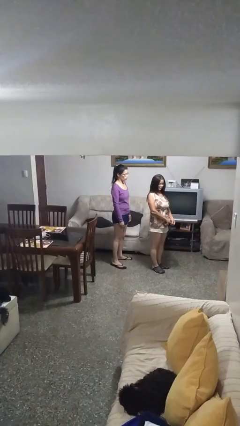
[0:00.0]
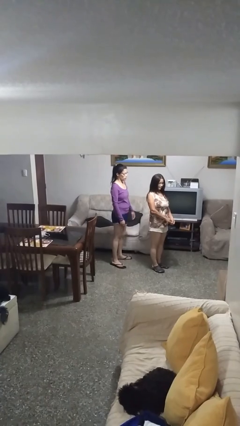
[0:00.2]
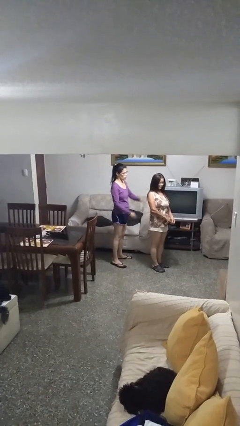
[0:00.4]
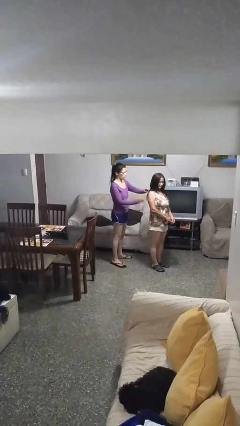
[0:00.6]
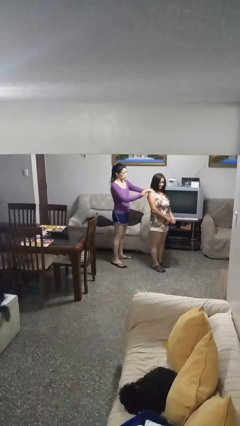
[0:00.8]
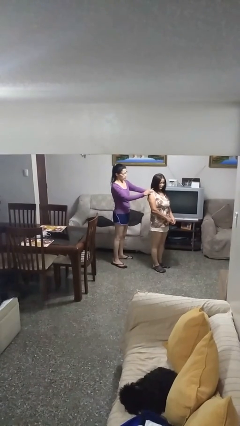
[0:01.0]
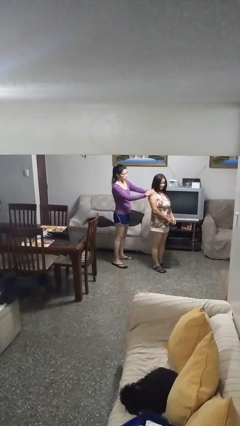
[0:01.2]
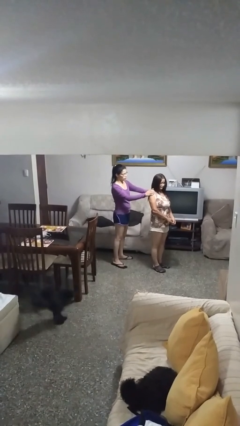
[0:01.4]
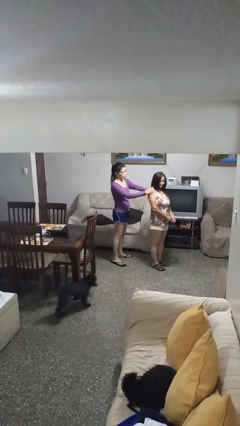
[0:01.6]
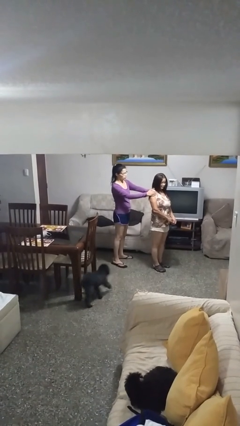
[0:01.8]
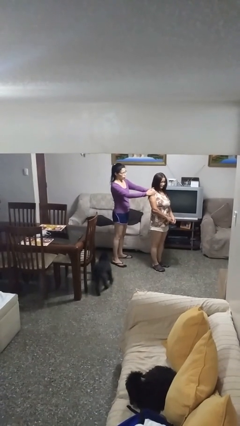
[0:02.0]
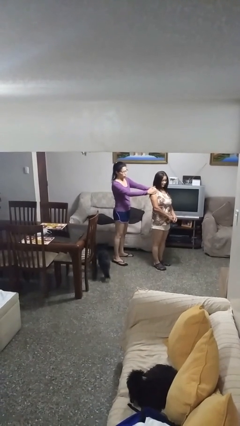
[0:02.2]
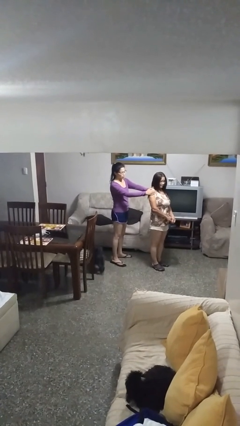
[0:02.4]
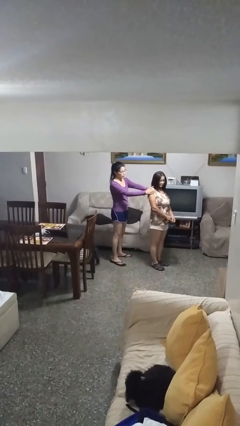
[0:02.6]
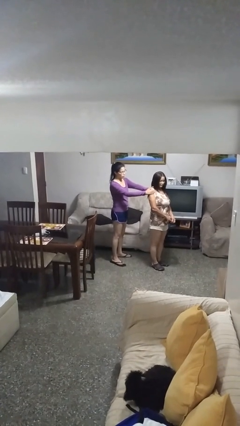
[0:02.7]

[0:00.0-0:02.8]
person grabs person by shoulder

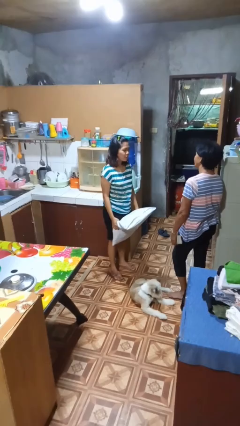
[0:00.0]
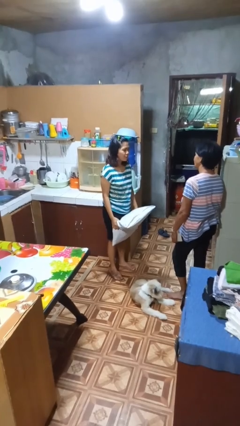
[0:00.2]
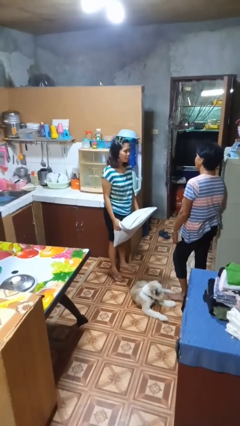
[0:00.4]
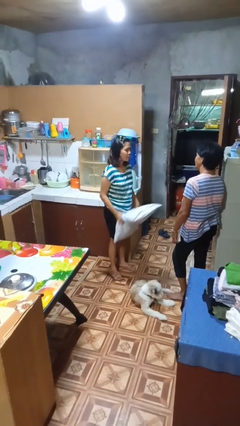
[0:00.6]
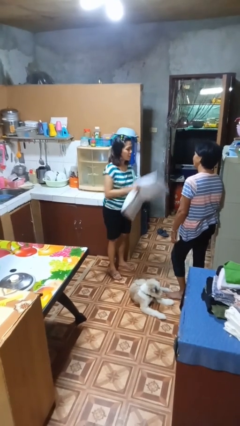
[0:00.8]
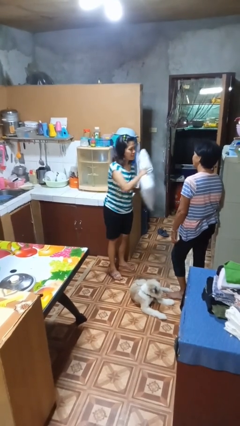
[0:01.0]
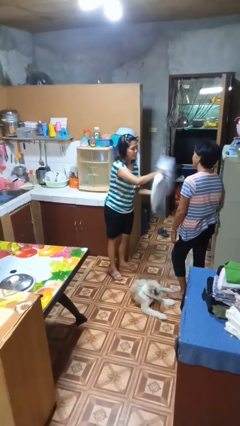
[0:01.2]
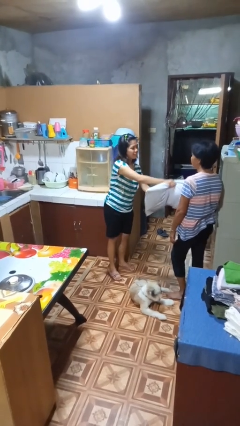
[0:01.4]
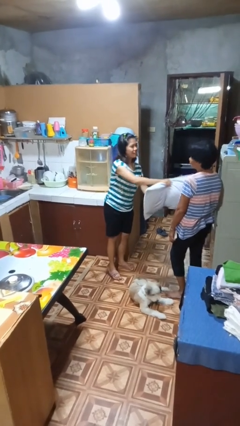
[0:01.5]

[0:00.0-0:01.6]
person hits person with pillow

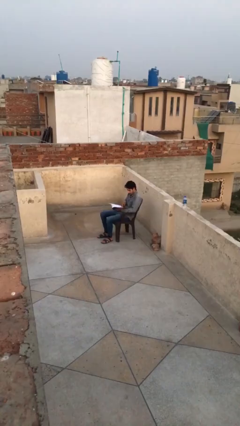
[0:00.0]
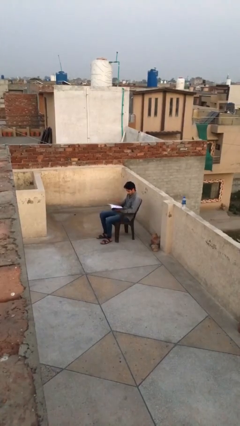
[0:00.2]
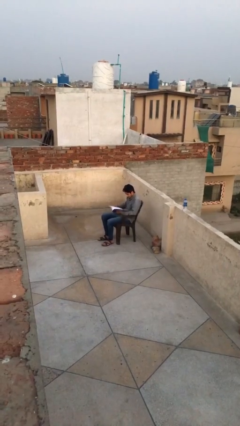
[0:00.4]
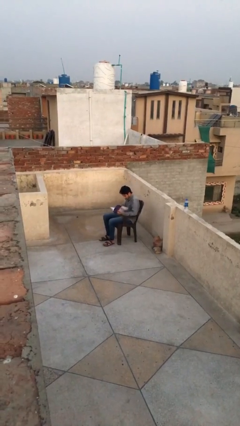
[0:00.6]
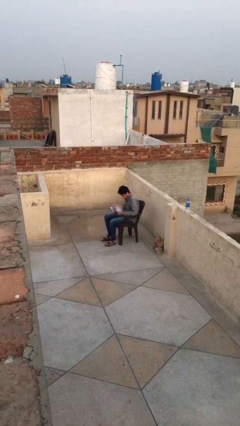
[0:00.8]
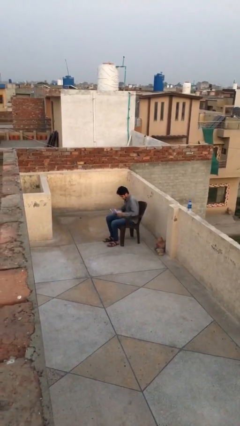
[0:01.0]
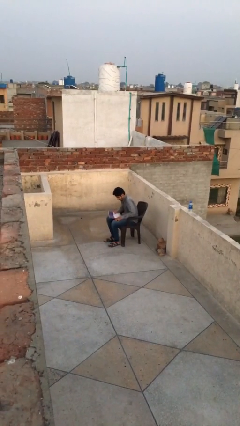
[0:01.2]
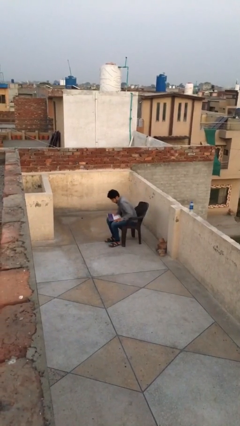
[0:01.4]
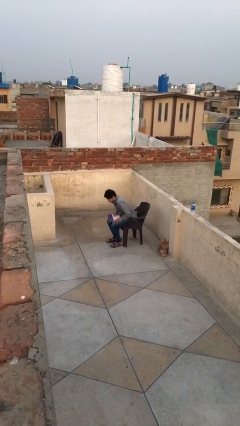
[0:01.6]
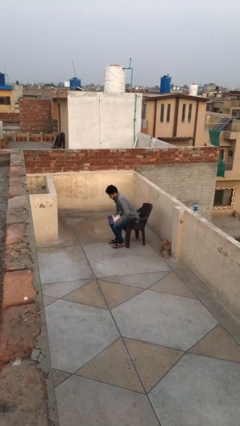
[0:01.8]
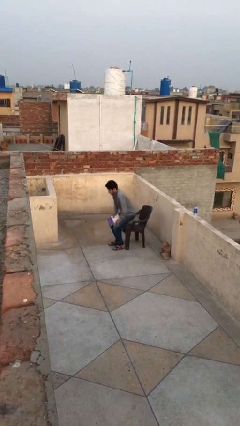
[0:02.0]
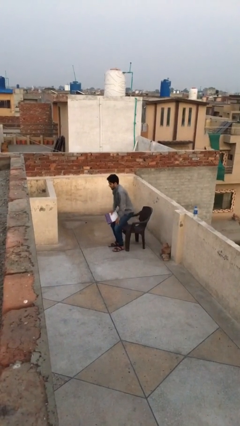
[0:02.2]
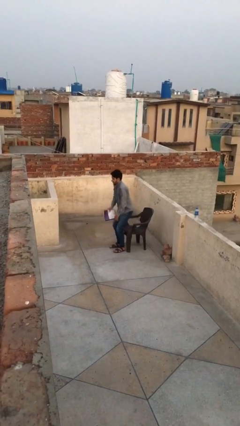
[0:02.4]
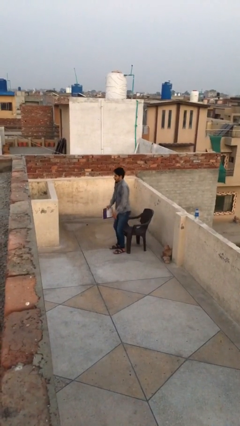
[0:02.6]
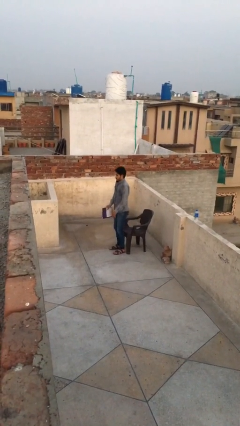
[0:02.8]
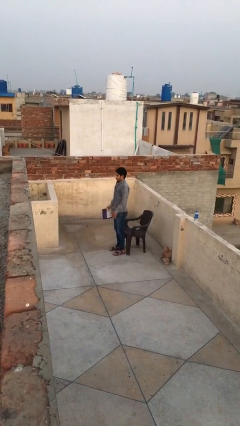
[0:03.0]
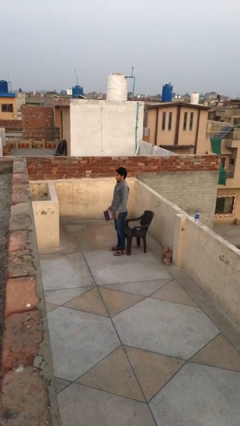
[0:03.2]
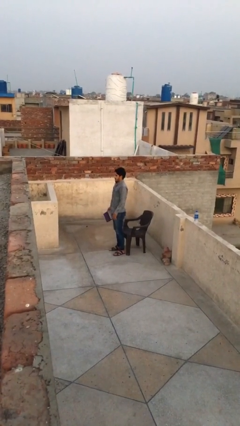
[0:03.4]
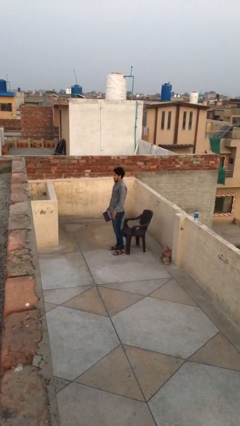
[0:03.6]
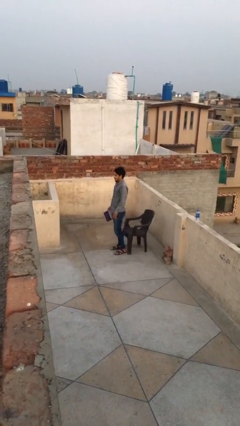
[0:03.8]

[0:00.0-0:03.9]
person stands up

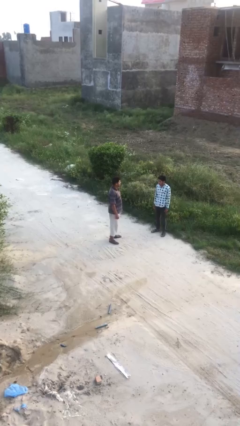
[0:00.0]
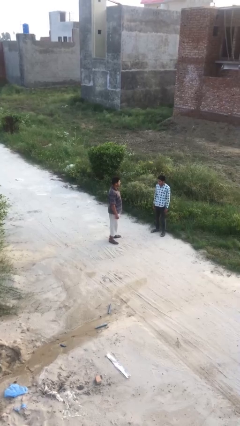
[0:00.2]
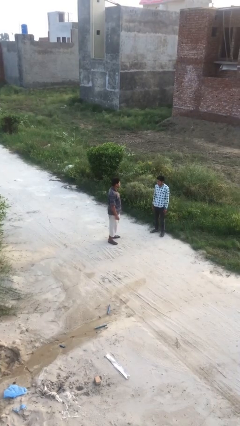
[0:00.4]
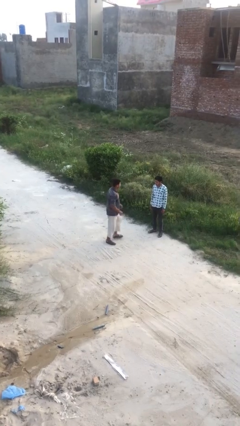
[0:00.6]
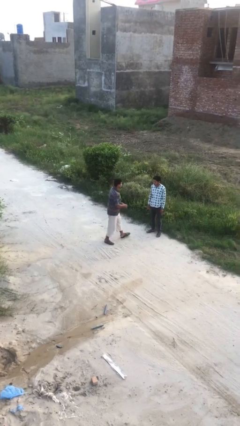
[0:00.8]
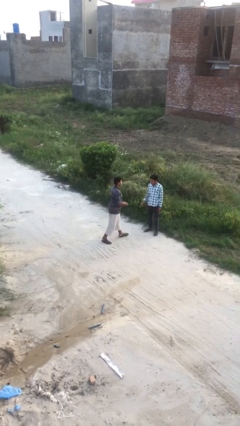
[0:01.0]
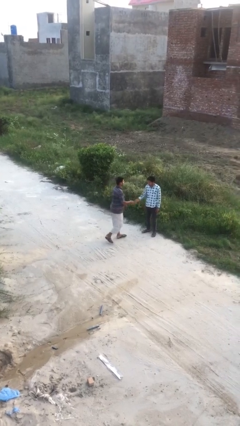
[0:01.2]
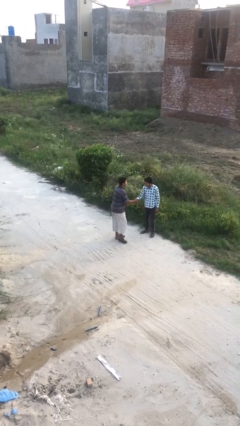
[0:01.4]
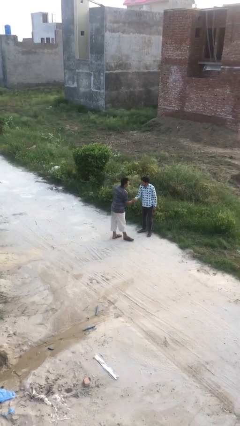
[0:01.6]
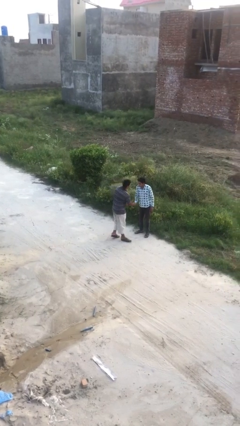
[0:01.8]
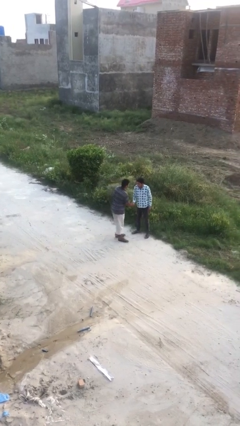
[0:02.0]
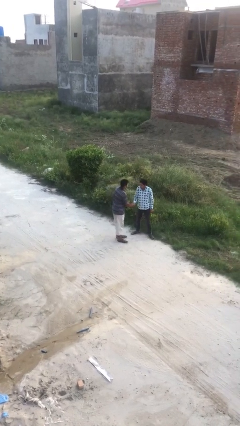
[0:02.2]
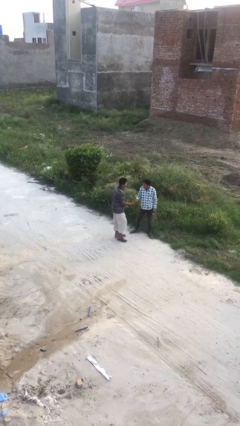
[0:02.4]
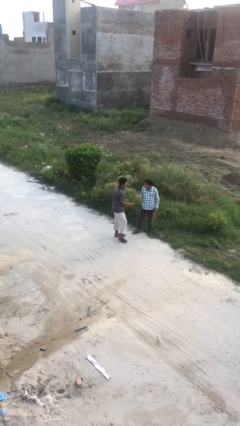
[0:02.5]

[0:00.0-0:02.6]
person shakes hand

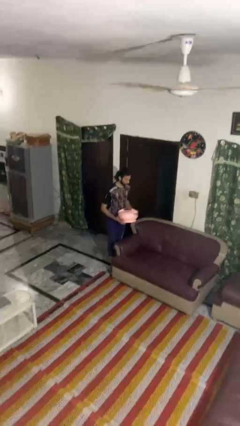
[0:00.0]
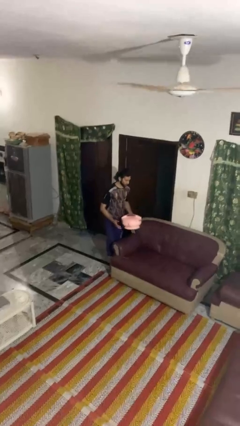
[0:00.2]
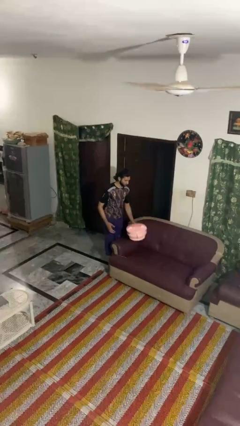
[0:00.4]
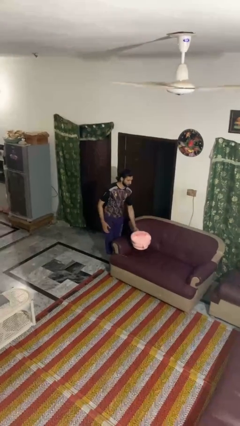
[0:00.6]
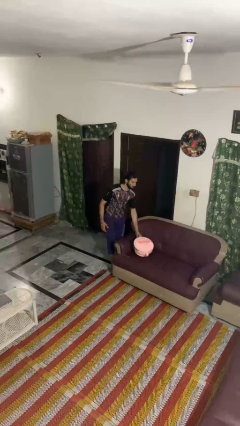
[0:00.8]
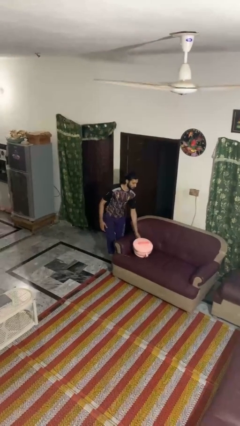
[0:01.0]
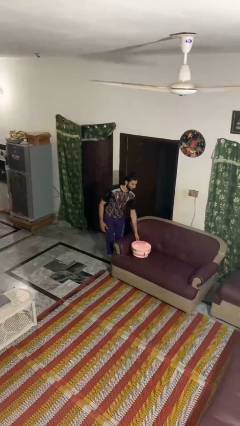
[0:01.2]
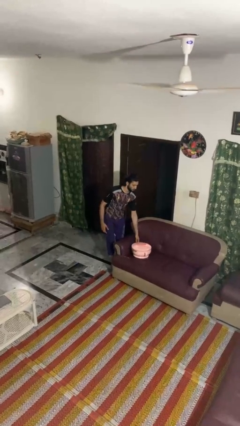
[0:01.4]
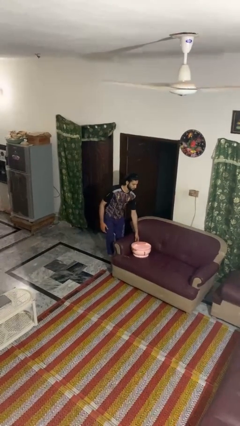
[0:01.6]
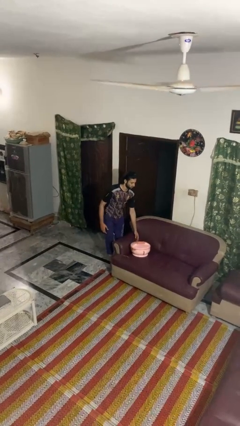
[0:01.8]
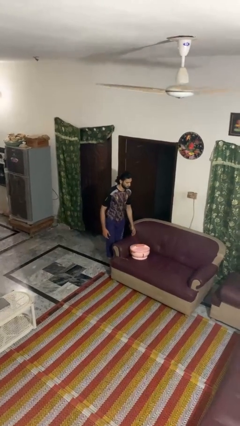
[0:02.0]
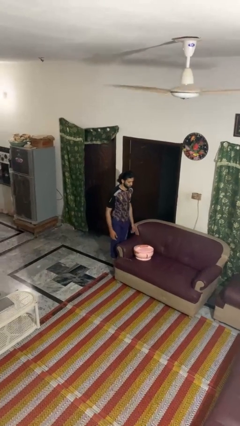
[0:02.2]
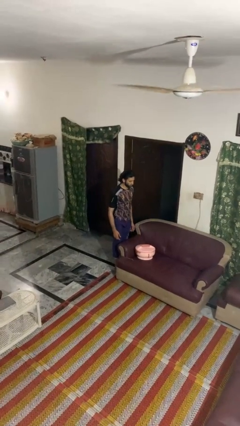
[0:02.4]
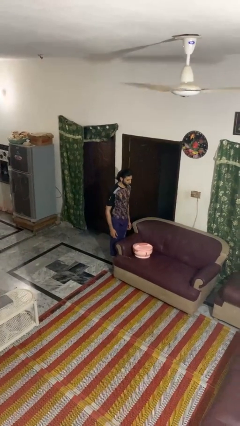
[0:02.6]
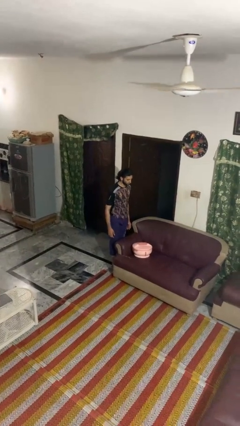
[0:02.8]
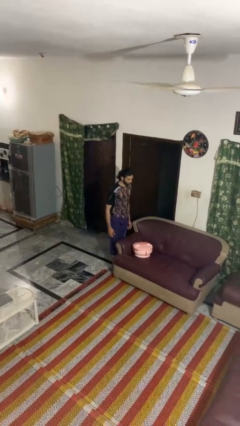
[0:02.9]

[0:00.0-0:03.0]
person puts down object on couch

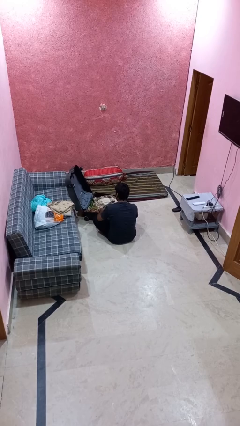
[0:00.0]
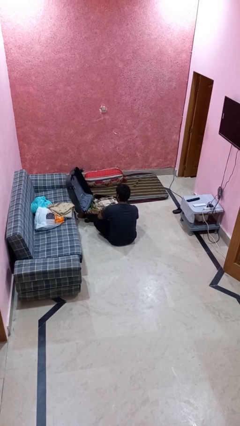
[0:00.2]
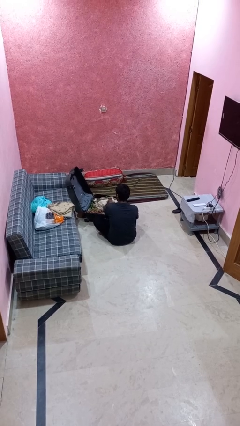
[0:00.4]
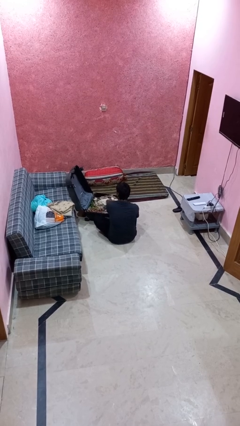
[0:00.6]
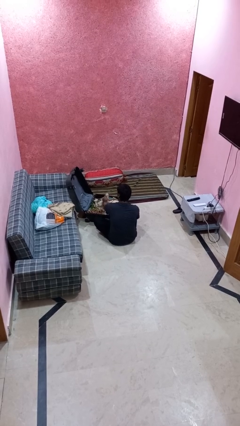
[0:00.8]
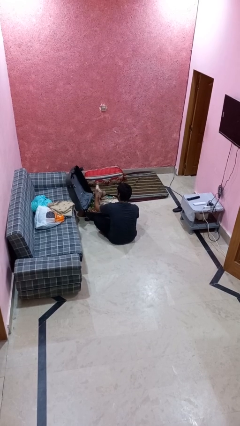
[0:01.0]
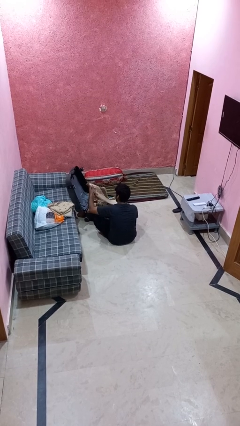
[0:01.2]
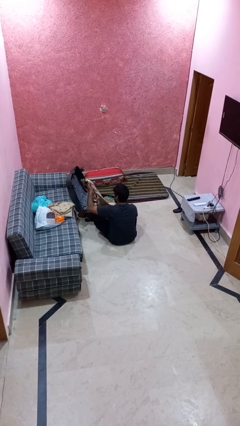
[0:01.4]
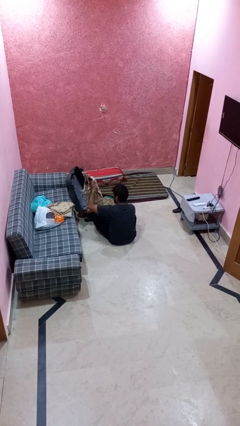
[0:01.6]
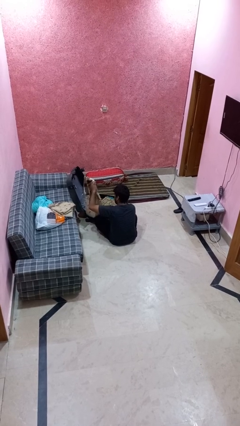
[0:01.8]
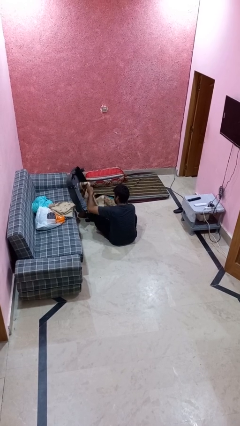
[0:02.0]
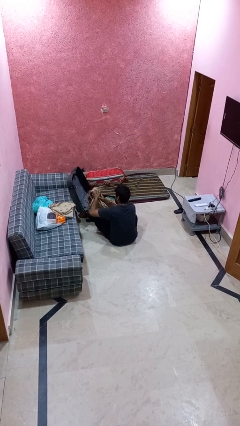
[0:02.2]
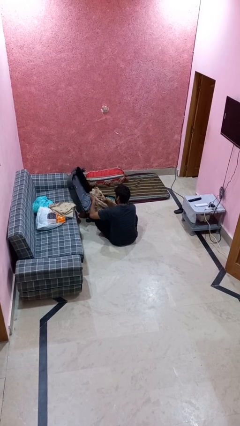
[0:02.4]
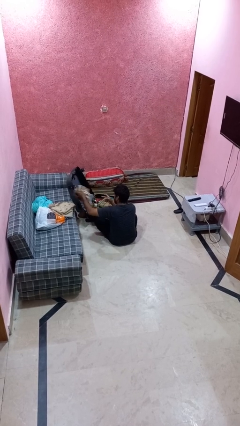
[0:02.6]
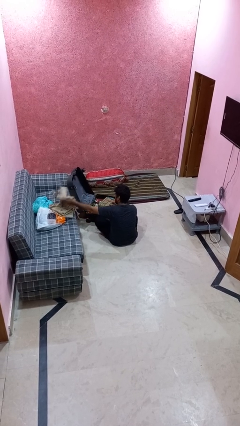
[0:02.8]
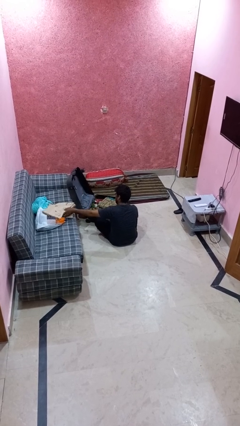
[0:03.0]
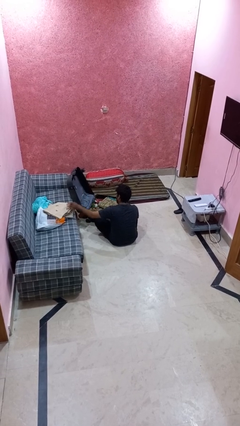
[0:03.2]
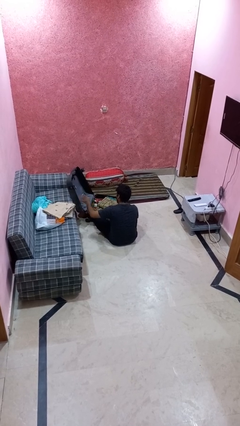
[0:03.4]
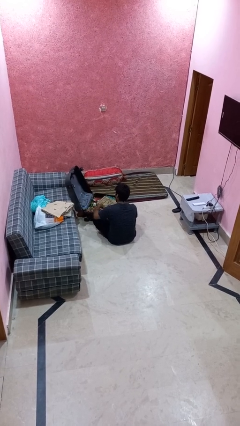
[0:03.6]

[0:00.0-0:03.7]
person unloads clothes from suitcase
